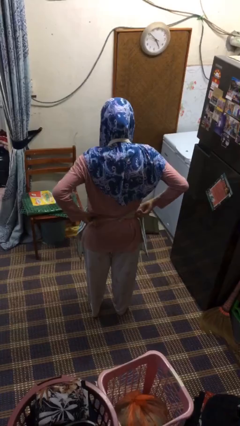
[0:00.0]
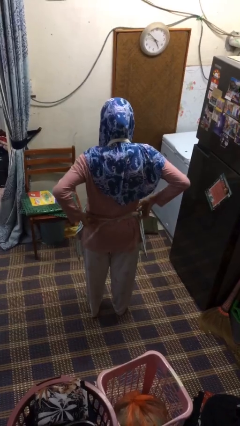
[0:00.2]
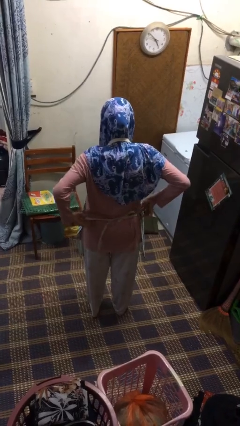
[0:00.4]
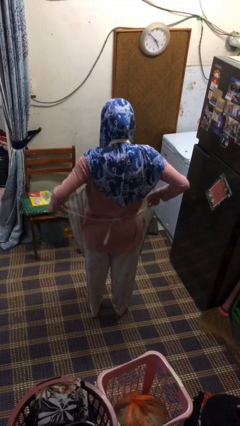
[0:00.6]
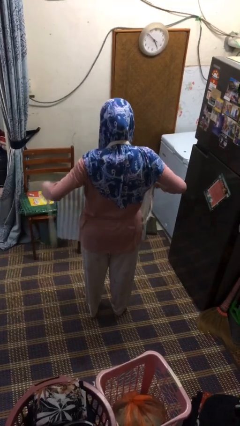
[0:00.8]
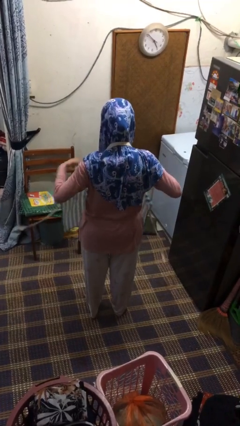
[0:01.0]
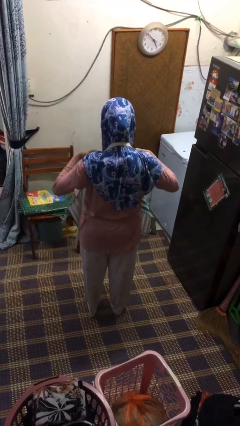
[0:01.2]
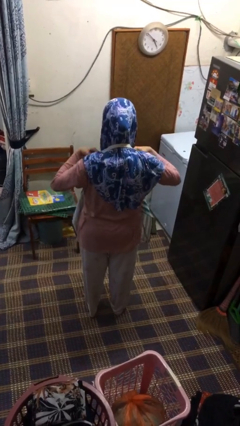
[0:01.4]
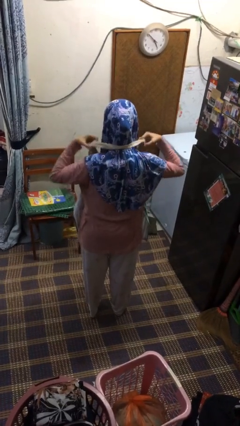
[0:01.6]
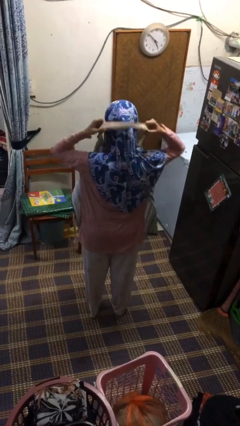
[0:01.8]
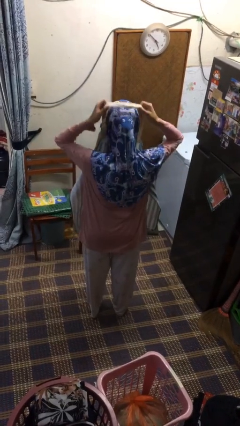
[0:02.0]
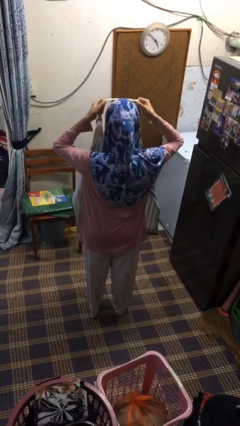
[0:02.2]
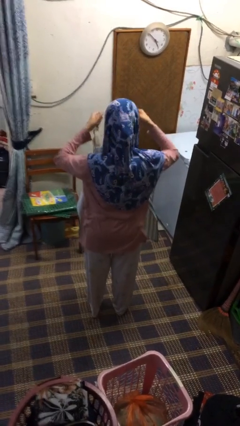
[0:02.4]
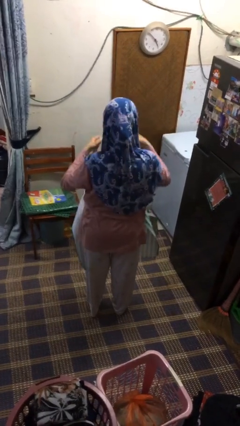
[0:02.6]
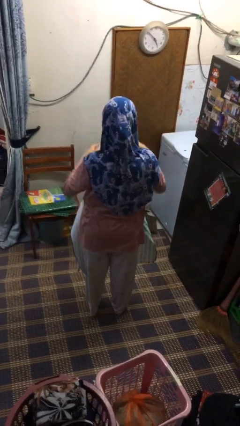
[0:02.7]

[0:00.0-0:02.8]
person takes off apron

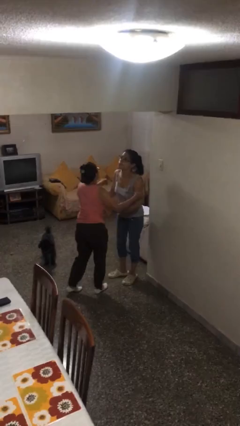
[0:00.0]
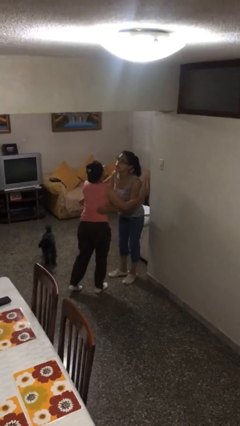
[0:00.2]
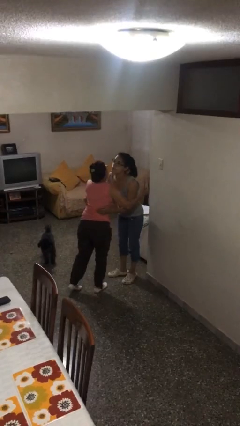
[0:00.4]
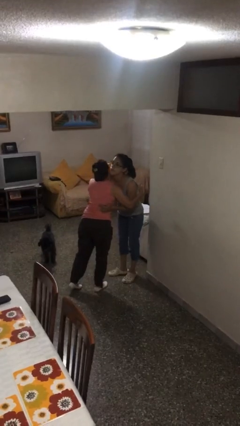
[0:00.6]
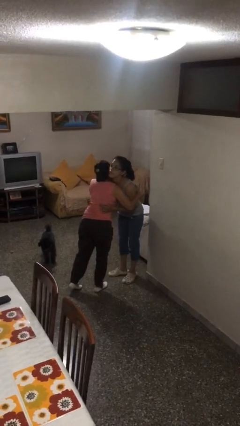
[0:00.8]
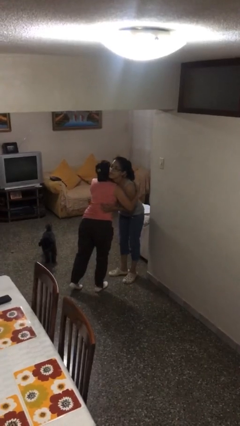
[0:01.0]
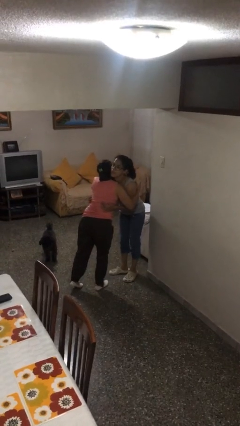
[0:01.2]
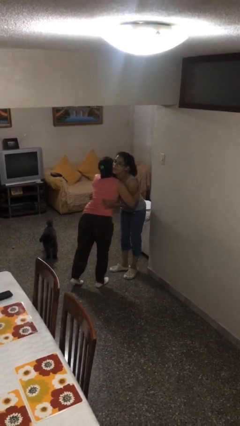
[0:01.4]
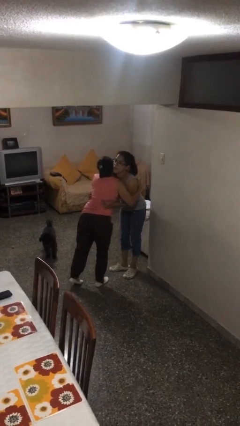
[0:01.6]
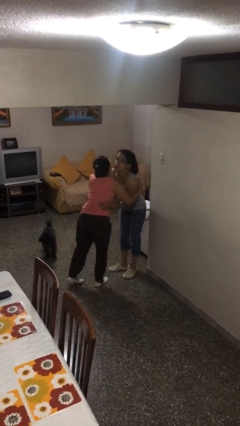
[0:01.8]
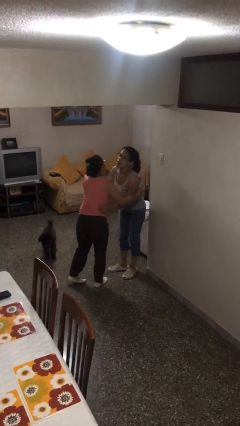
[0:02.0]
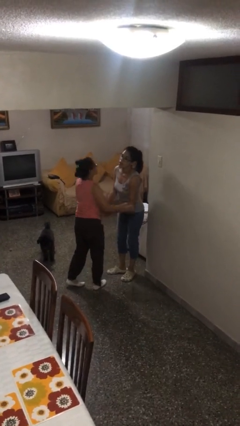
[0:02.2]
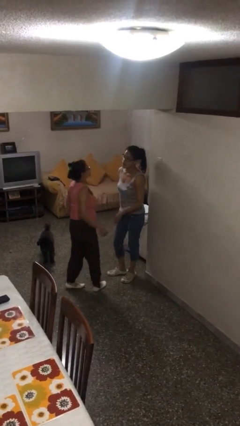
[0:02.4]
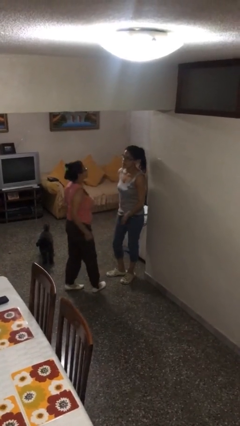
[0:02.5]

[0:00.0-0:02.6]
person embraces person

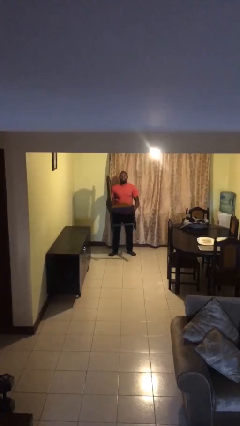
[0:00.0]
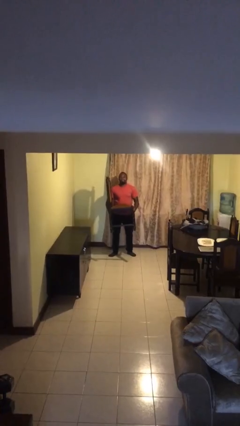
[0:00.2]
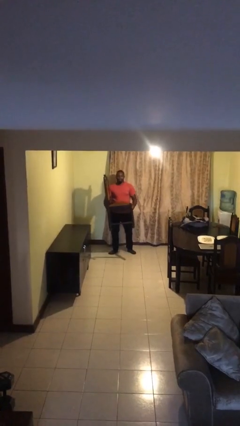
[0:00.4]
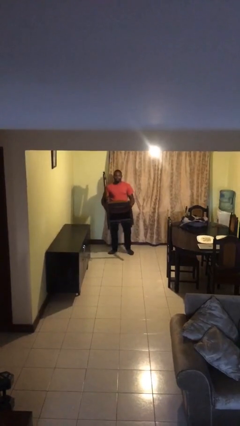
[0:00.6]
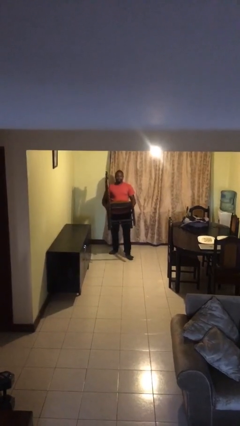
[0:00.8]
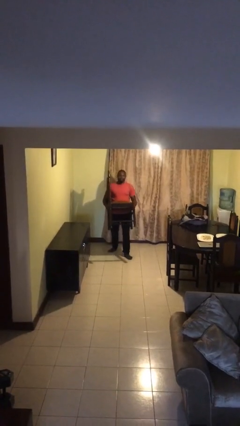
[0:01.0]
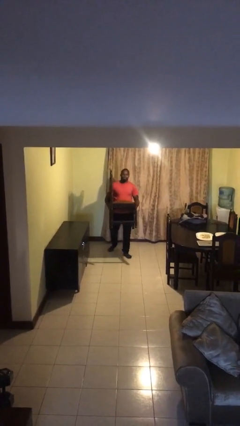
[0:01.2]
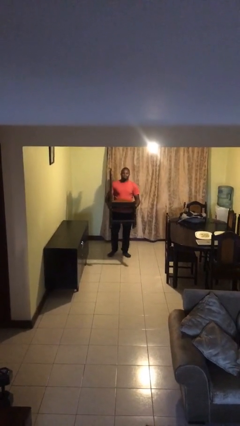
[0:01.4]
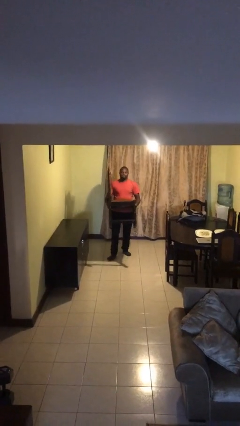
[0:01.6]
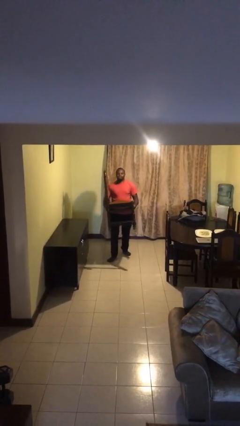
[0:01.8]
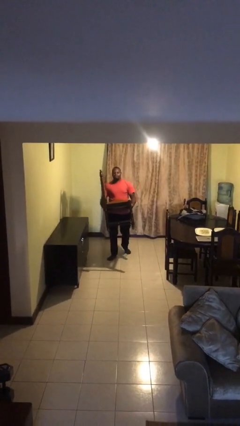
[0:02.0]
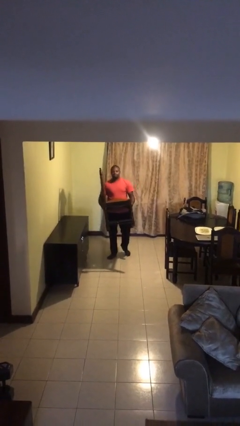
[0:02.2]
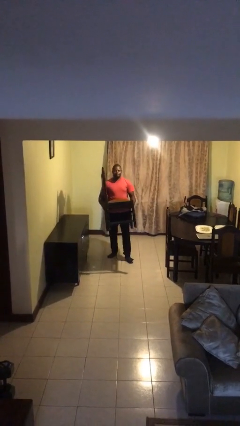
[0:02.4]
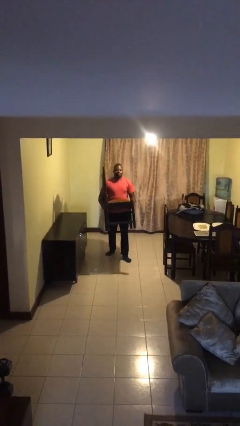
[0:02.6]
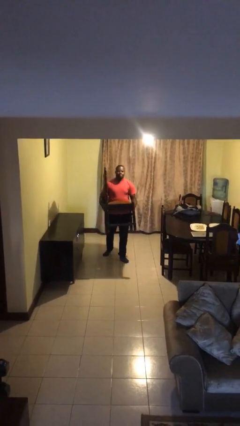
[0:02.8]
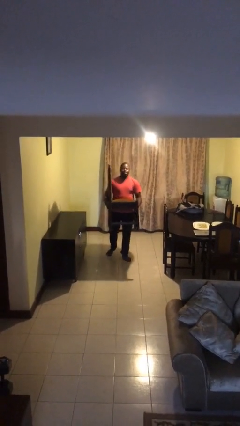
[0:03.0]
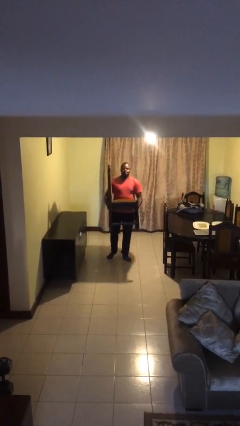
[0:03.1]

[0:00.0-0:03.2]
person carries heavy object

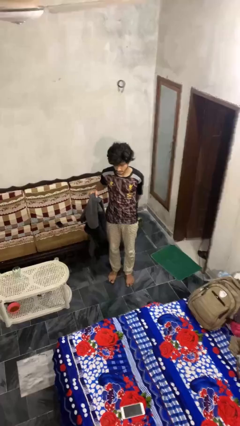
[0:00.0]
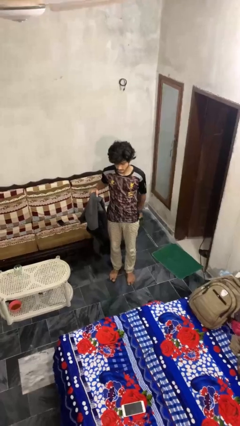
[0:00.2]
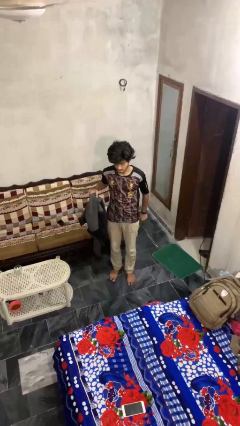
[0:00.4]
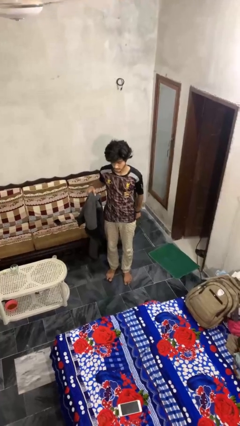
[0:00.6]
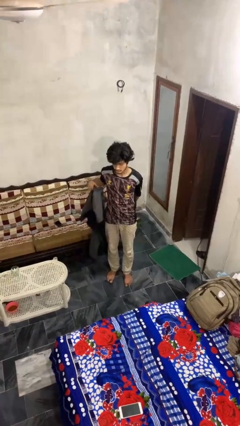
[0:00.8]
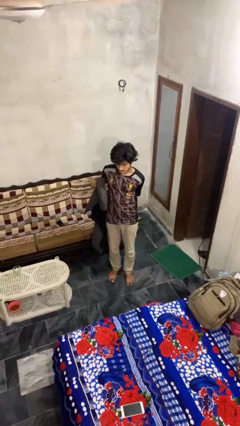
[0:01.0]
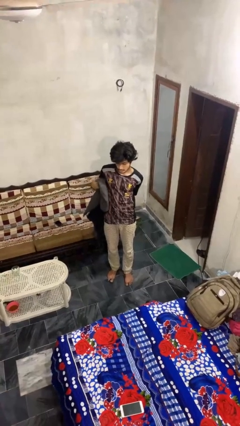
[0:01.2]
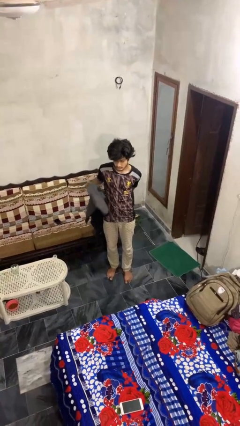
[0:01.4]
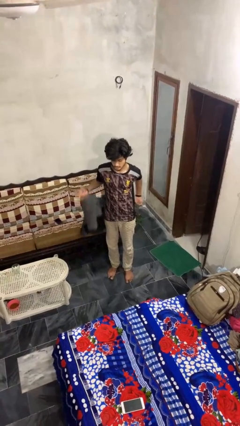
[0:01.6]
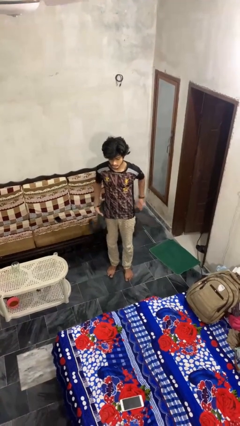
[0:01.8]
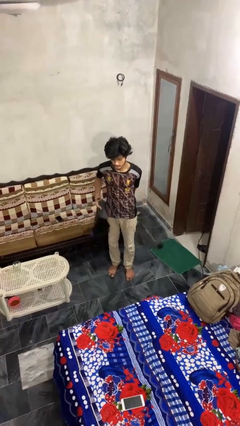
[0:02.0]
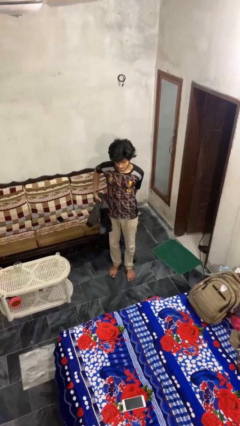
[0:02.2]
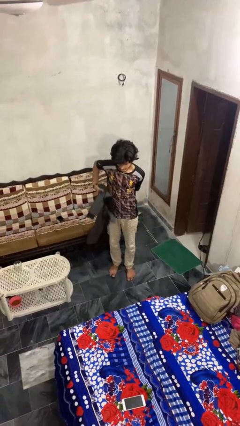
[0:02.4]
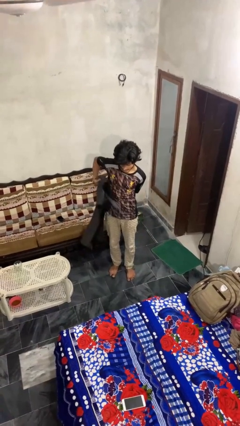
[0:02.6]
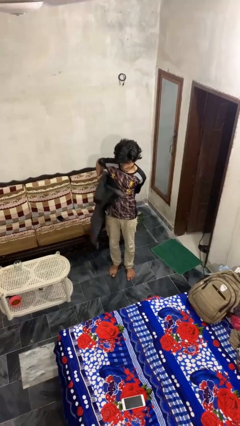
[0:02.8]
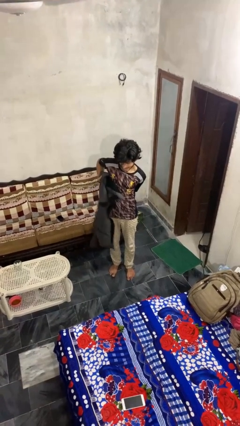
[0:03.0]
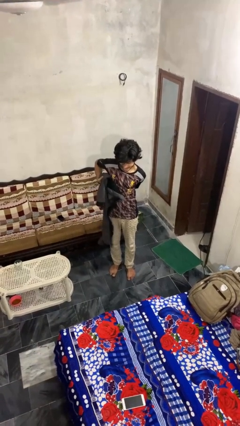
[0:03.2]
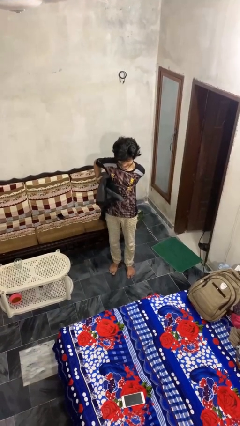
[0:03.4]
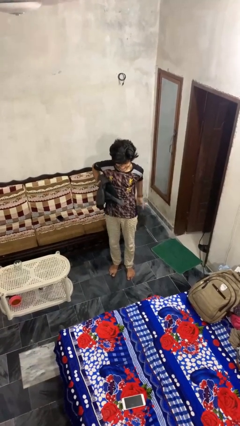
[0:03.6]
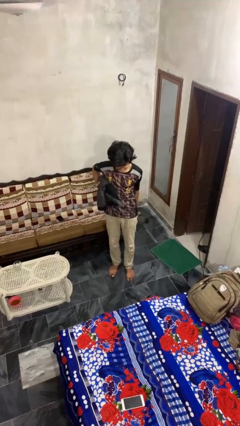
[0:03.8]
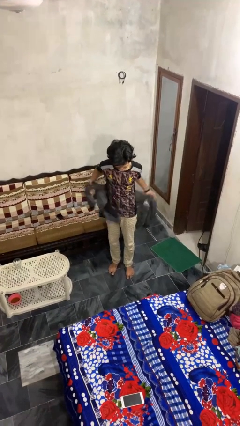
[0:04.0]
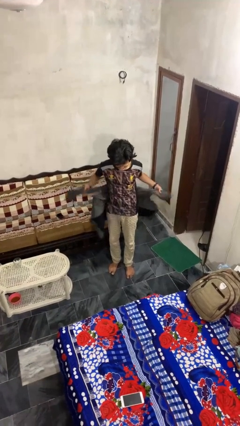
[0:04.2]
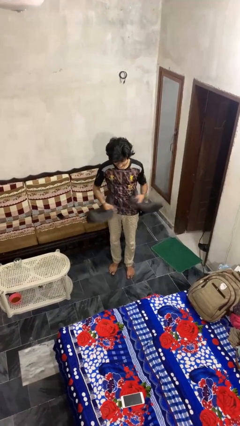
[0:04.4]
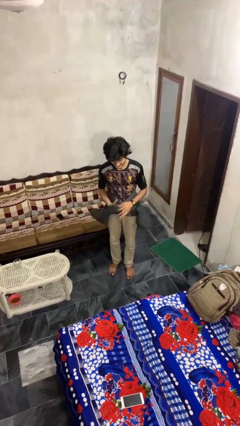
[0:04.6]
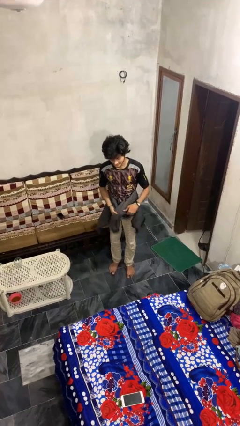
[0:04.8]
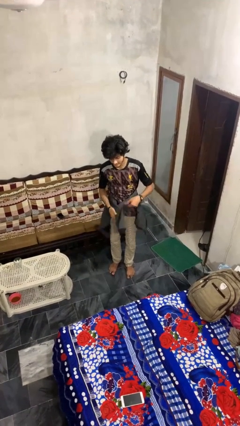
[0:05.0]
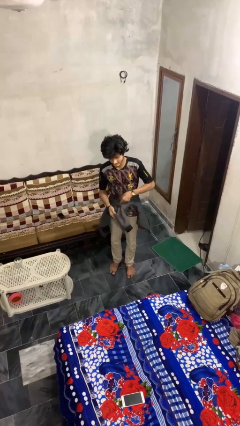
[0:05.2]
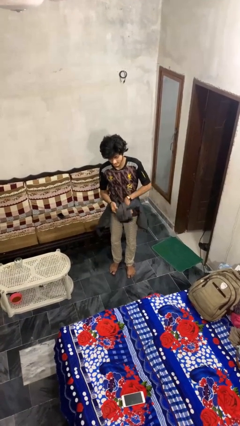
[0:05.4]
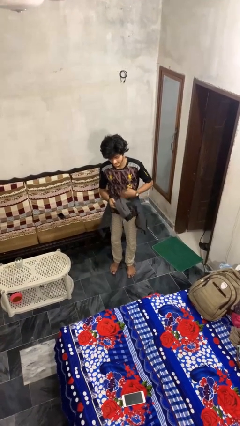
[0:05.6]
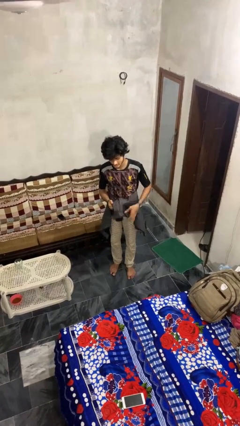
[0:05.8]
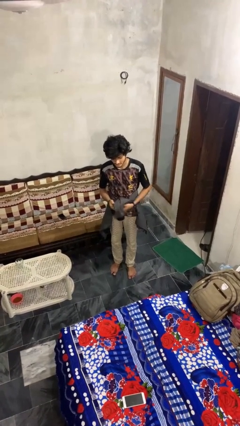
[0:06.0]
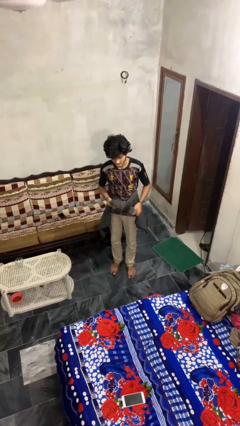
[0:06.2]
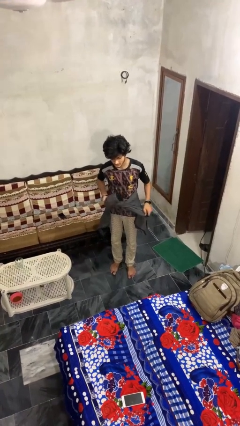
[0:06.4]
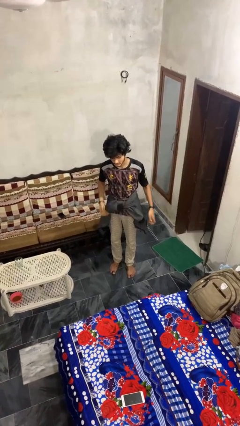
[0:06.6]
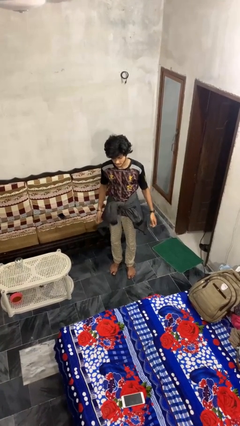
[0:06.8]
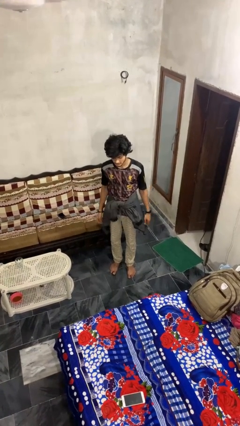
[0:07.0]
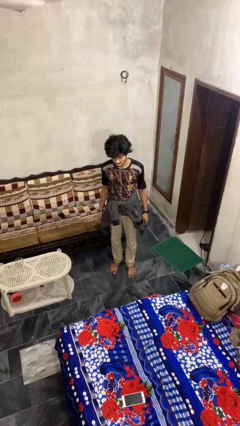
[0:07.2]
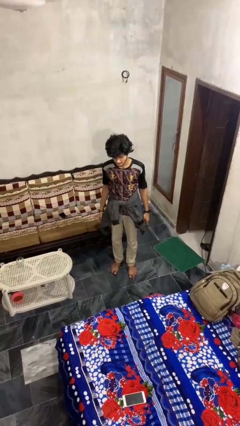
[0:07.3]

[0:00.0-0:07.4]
person ties jacket around waist

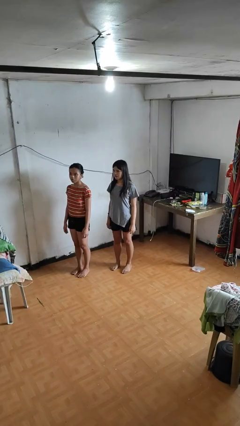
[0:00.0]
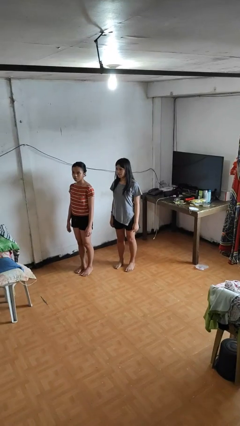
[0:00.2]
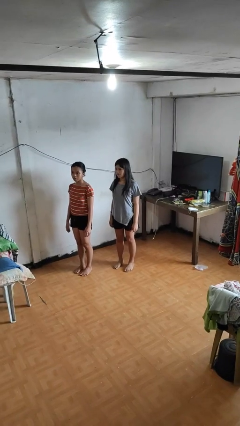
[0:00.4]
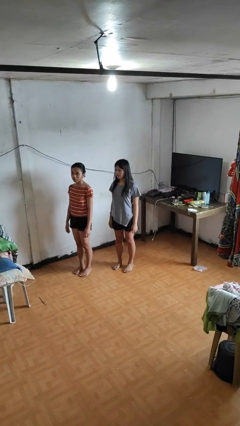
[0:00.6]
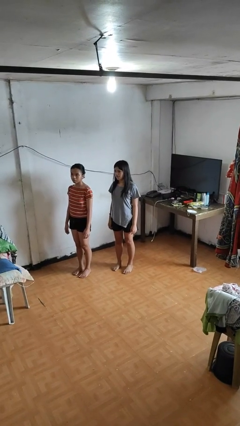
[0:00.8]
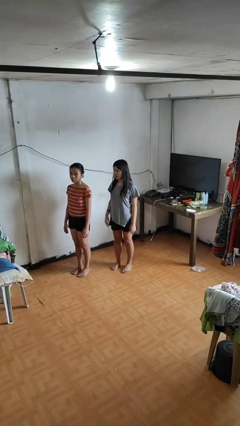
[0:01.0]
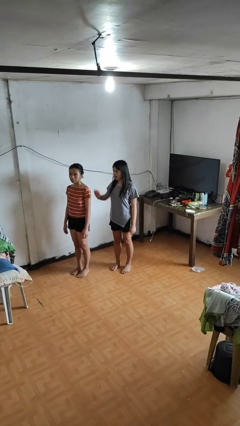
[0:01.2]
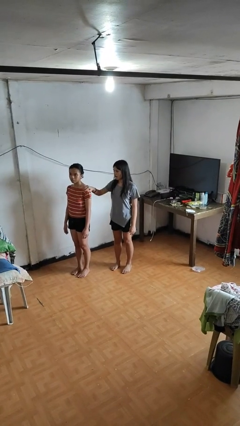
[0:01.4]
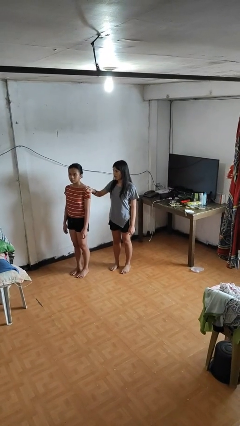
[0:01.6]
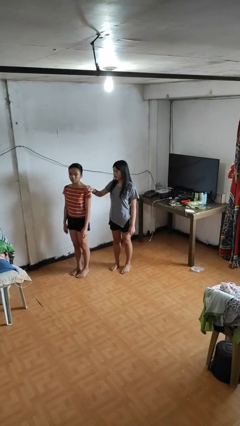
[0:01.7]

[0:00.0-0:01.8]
person grabs person by shoulder
